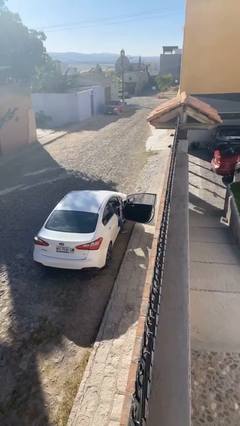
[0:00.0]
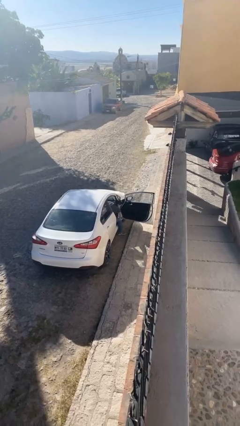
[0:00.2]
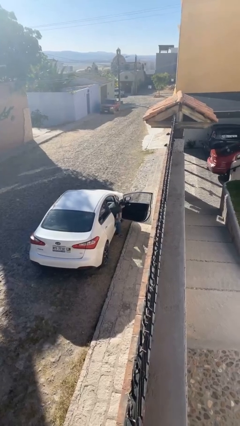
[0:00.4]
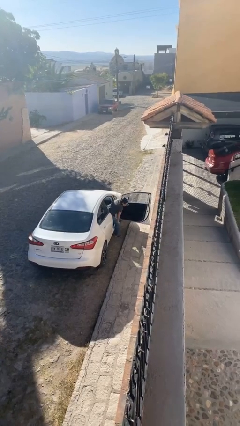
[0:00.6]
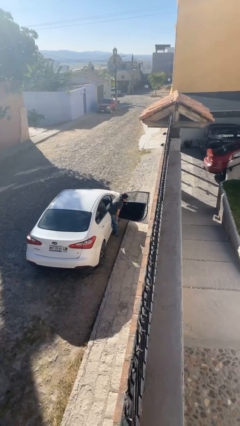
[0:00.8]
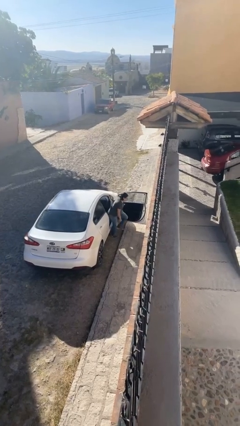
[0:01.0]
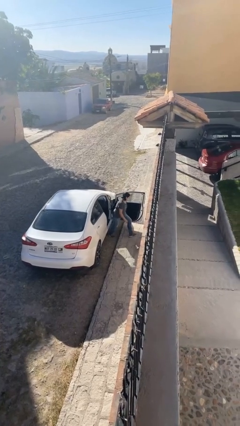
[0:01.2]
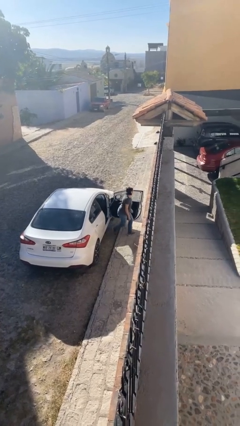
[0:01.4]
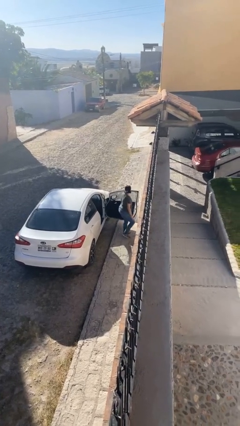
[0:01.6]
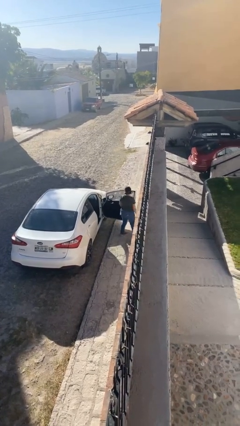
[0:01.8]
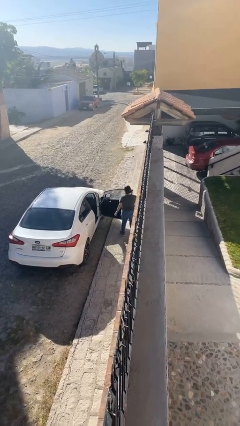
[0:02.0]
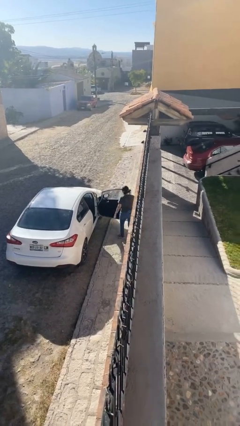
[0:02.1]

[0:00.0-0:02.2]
person exits car

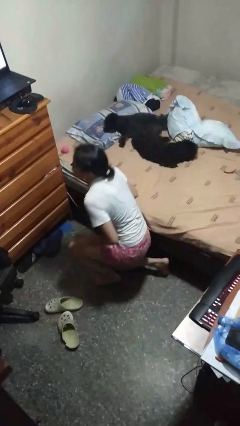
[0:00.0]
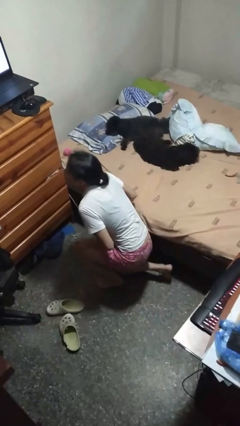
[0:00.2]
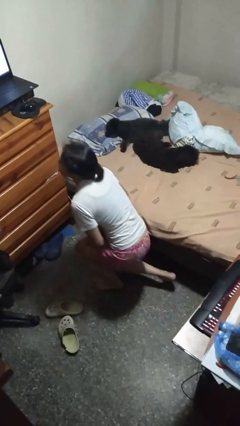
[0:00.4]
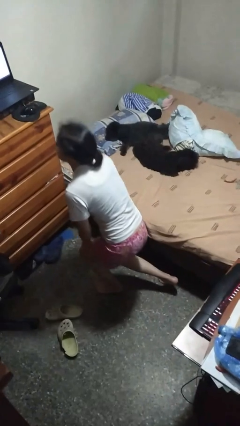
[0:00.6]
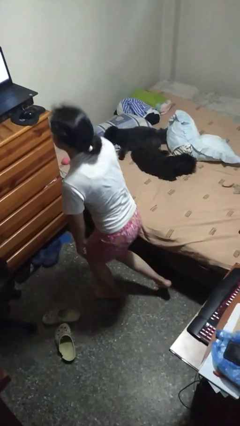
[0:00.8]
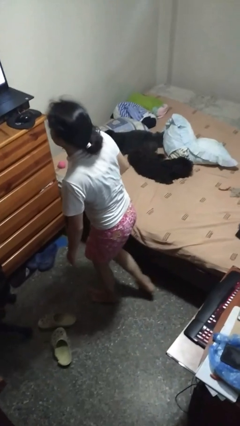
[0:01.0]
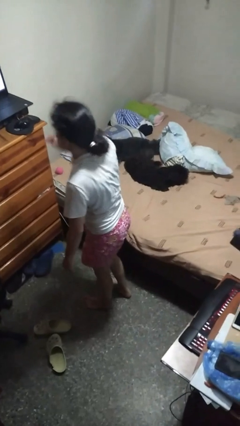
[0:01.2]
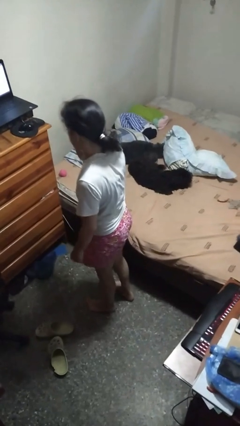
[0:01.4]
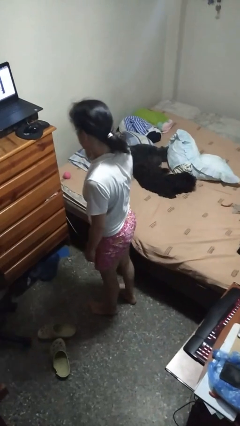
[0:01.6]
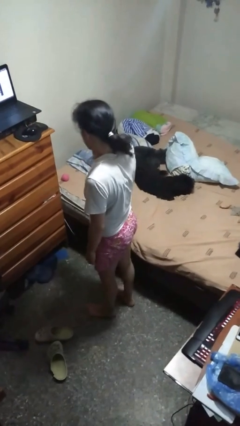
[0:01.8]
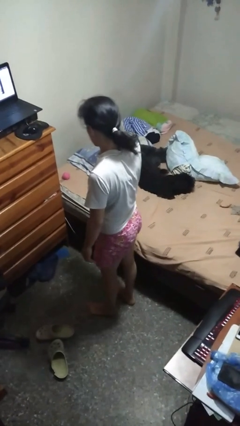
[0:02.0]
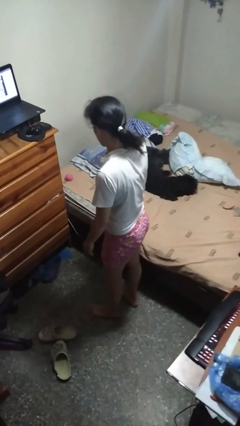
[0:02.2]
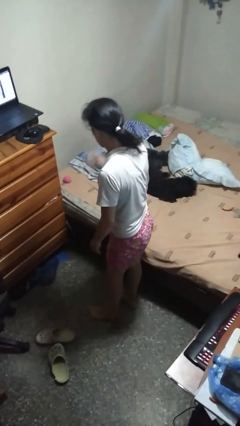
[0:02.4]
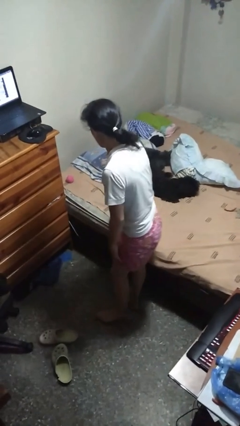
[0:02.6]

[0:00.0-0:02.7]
person stands up from floor

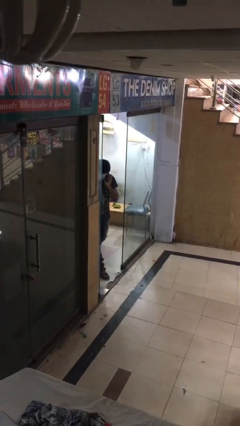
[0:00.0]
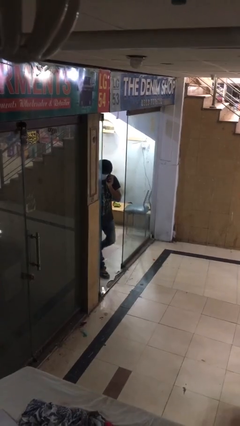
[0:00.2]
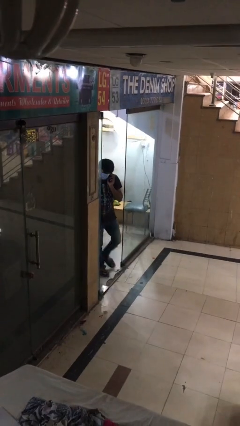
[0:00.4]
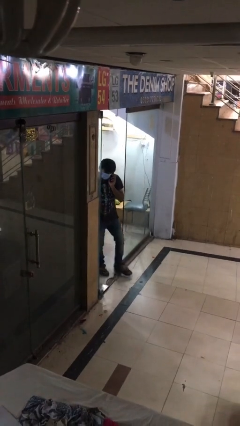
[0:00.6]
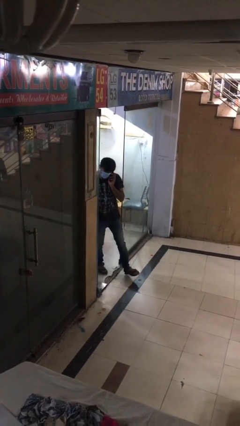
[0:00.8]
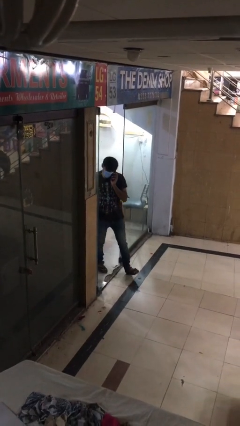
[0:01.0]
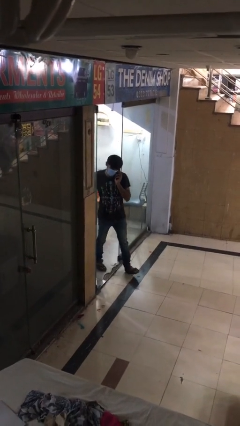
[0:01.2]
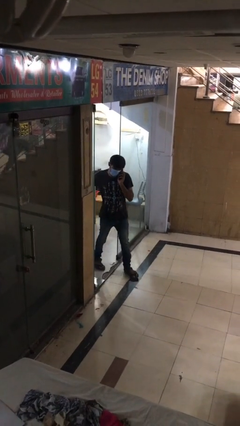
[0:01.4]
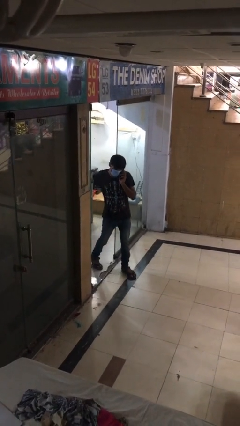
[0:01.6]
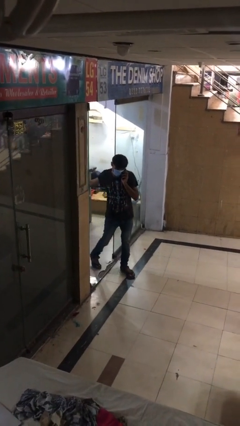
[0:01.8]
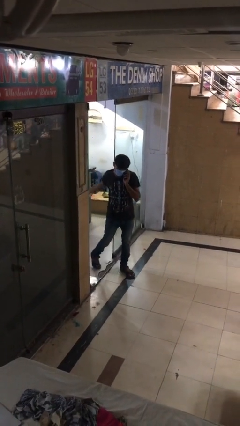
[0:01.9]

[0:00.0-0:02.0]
person enters scene through structure

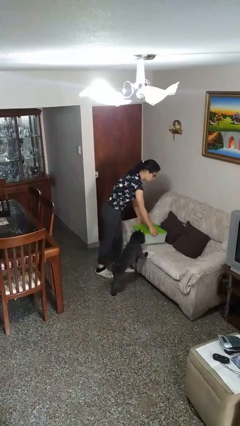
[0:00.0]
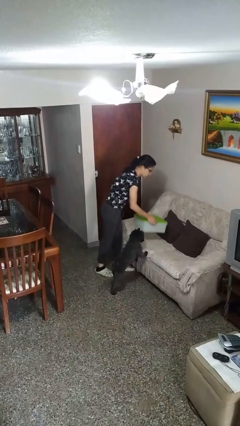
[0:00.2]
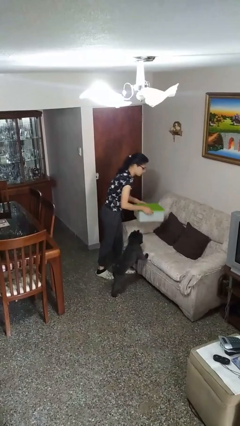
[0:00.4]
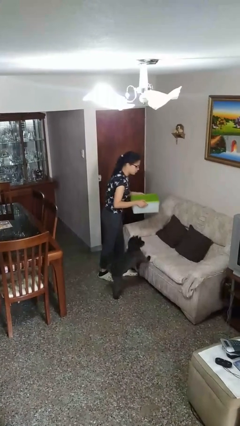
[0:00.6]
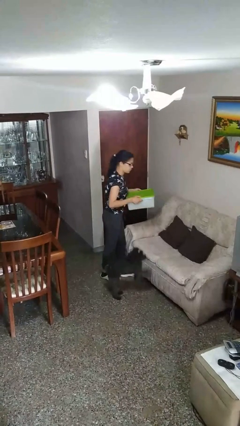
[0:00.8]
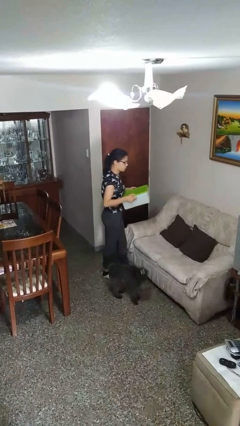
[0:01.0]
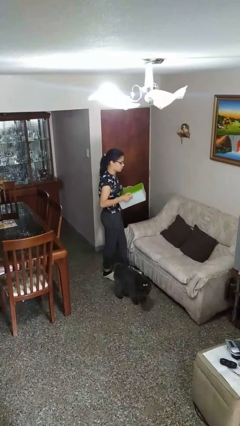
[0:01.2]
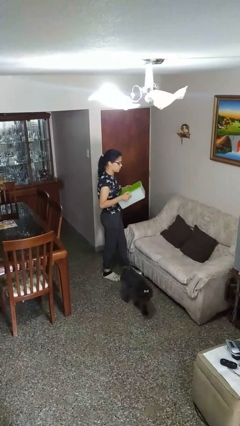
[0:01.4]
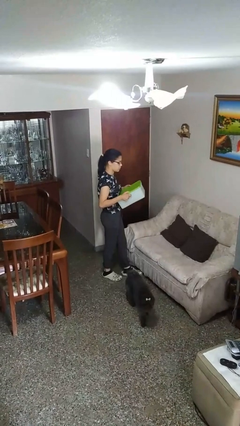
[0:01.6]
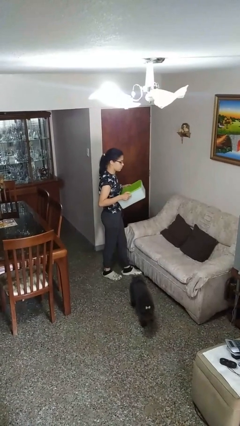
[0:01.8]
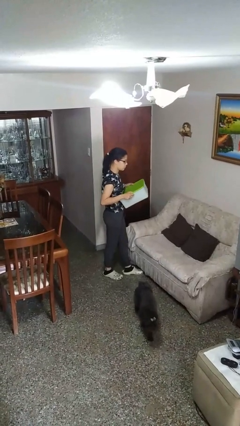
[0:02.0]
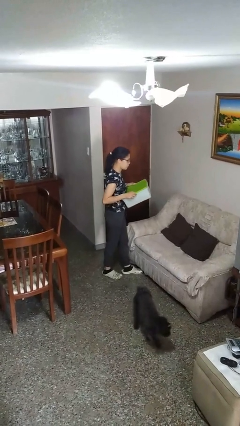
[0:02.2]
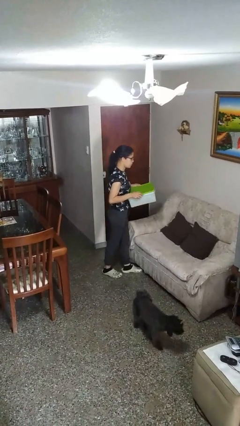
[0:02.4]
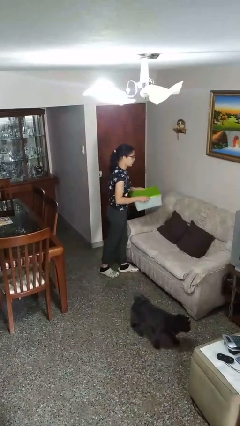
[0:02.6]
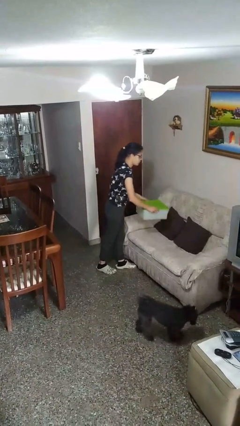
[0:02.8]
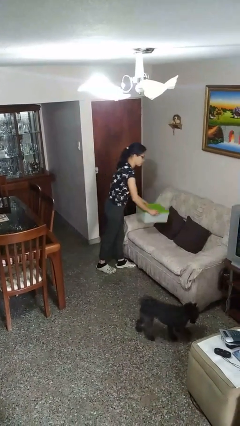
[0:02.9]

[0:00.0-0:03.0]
person picks up object from couch

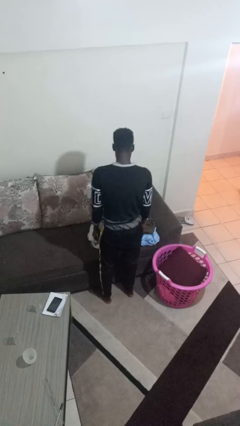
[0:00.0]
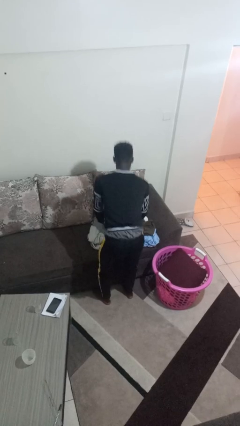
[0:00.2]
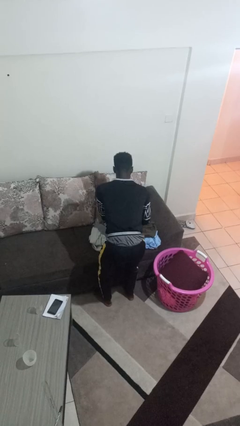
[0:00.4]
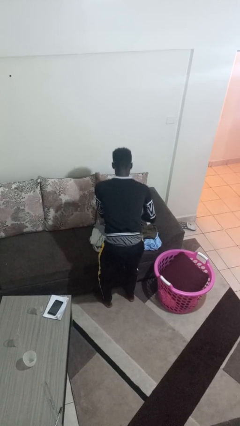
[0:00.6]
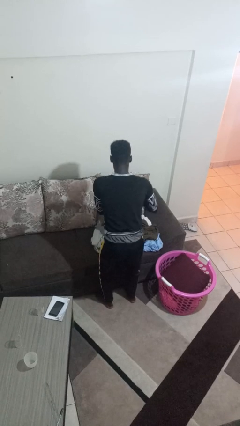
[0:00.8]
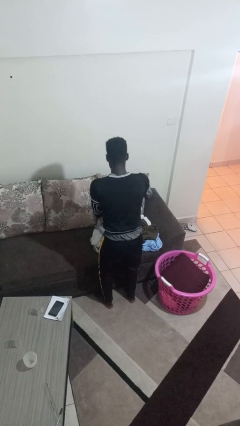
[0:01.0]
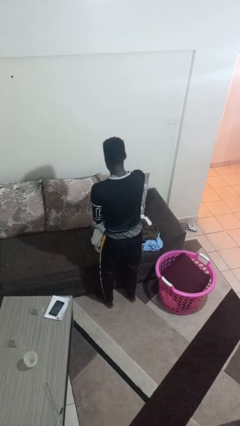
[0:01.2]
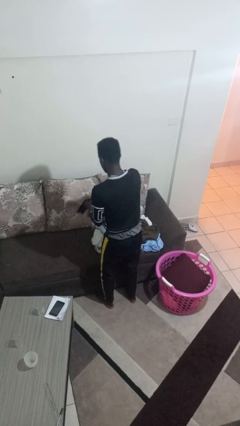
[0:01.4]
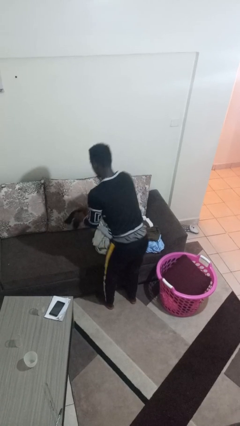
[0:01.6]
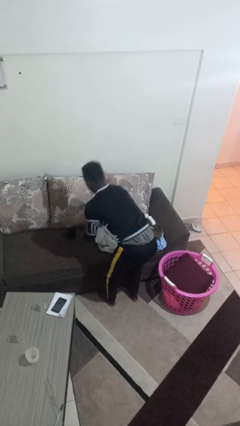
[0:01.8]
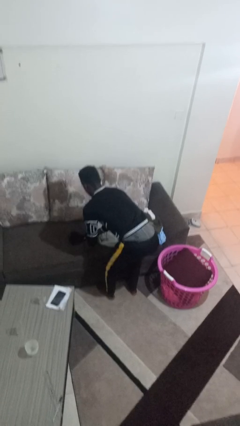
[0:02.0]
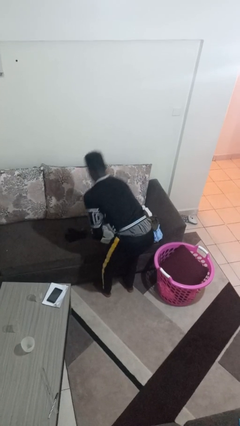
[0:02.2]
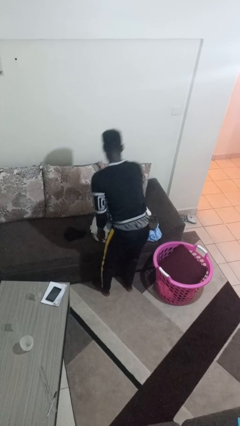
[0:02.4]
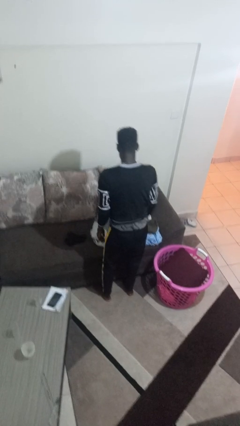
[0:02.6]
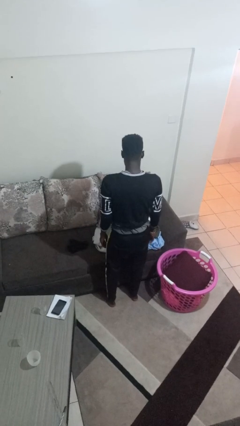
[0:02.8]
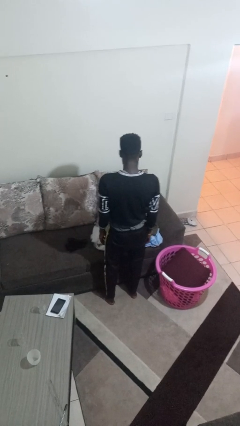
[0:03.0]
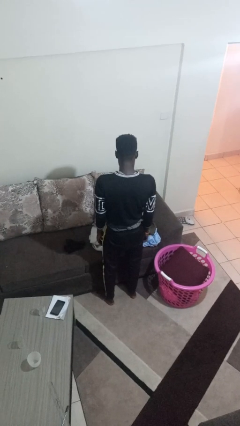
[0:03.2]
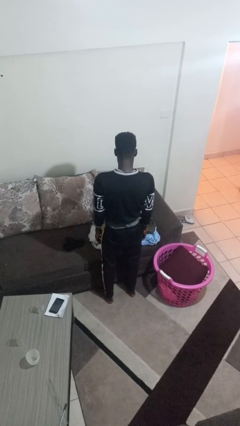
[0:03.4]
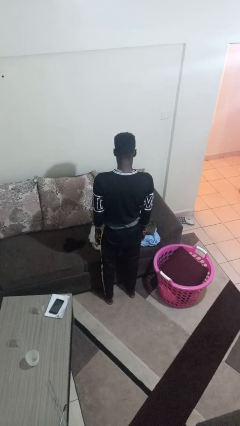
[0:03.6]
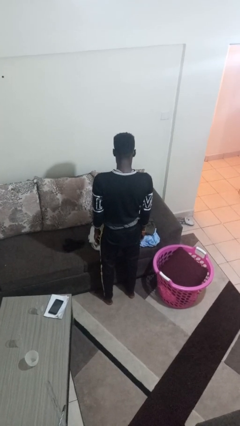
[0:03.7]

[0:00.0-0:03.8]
person folds socks

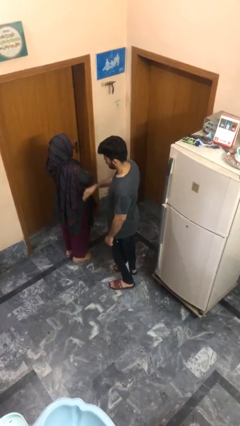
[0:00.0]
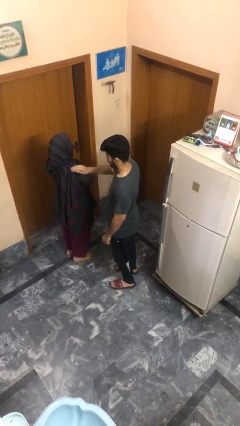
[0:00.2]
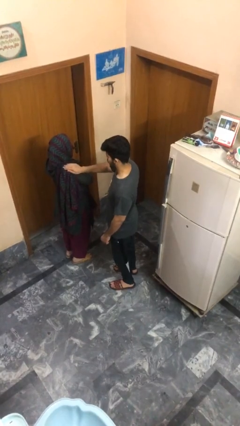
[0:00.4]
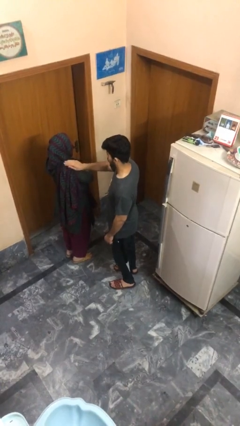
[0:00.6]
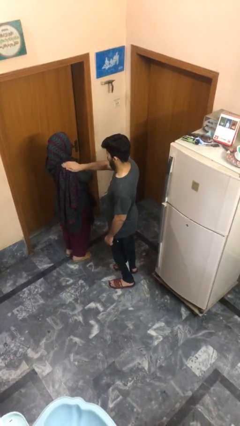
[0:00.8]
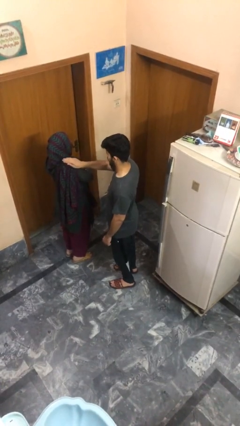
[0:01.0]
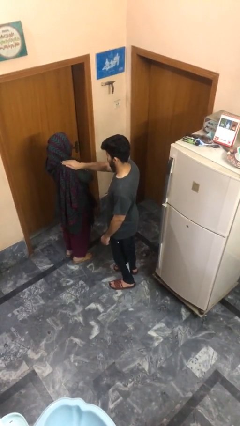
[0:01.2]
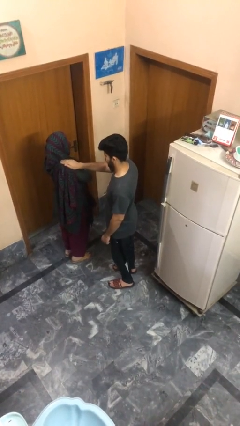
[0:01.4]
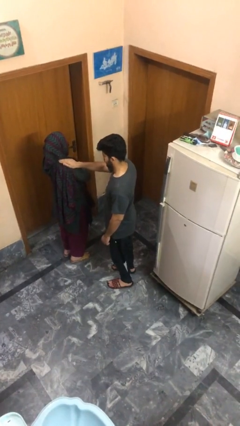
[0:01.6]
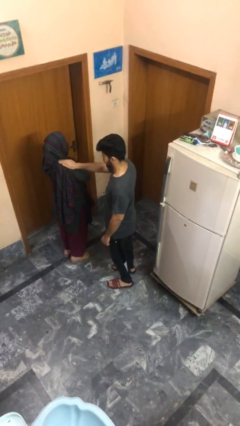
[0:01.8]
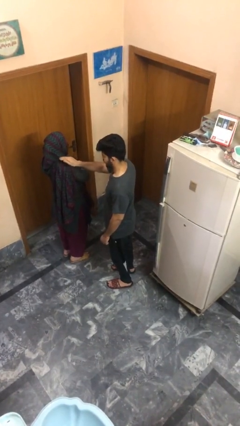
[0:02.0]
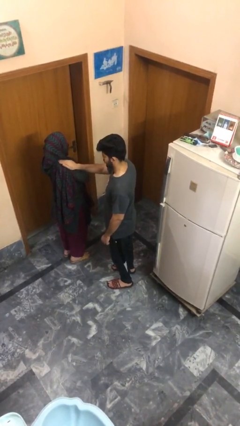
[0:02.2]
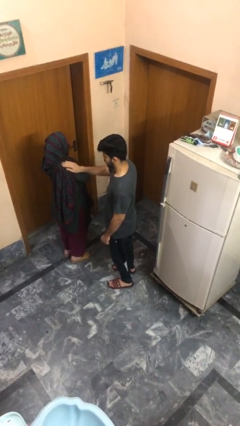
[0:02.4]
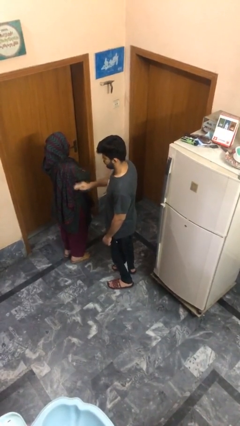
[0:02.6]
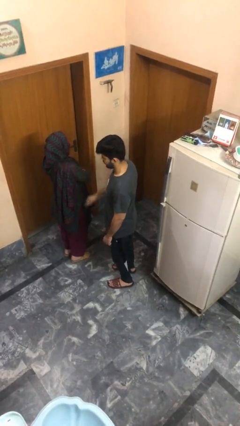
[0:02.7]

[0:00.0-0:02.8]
person pounds shoulders of person

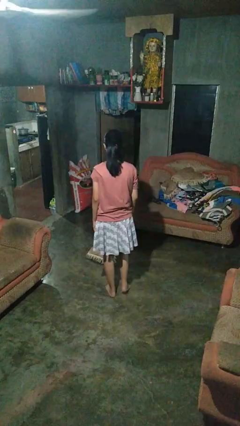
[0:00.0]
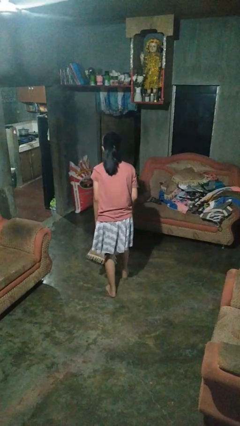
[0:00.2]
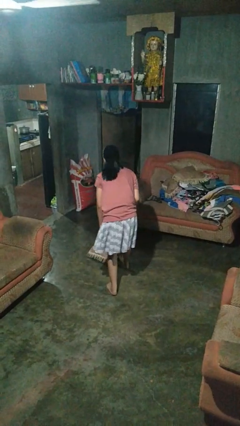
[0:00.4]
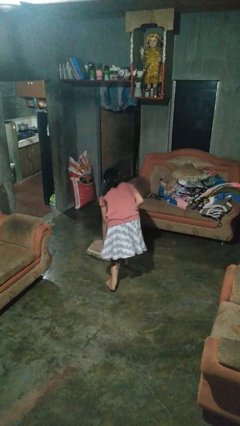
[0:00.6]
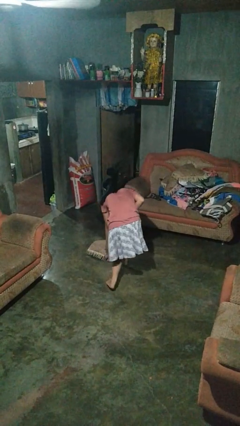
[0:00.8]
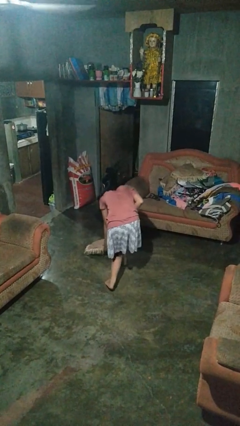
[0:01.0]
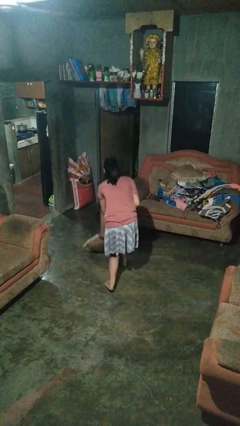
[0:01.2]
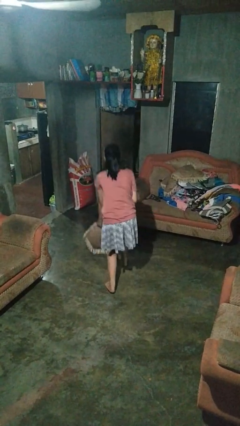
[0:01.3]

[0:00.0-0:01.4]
person picks up object from floor
